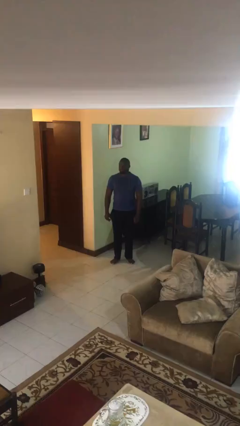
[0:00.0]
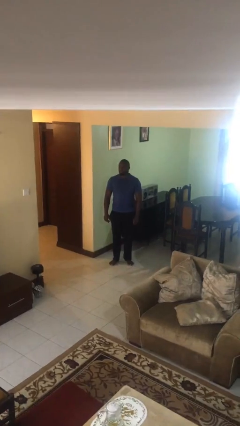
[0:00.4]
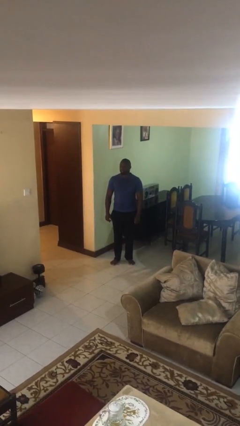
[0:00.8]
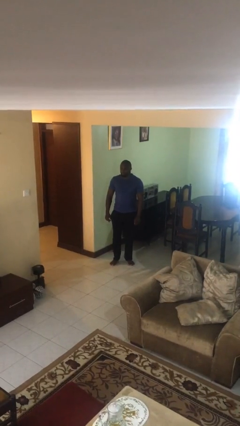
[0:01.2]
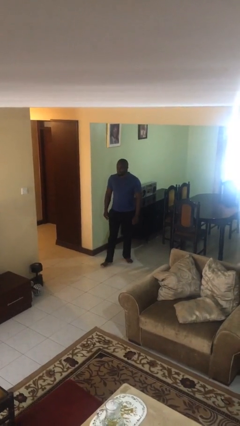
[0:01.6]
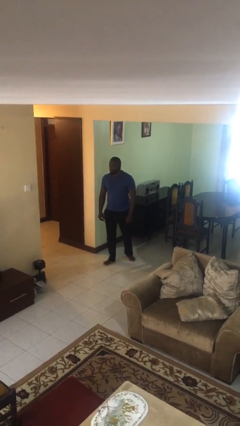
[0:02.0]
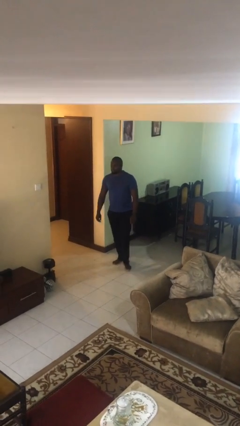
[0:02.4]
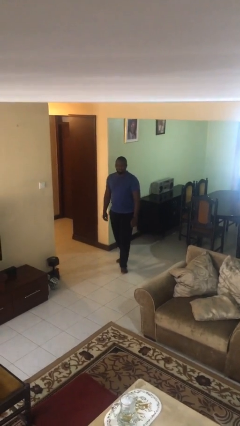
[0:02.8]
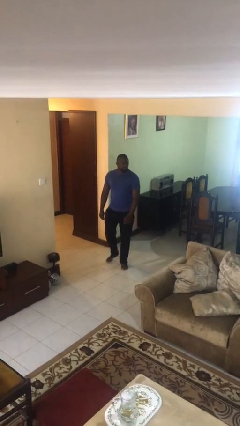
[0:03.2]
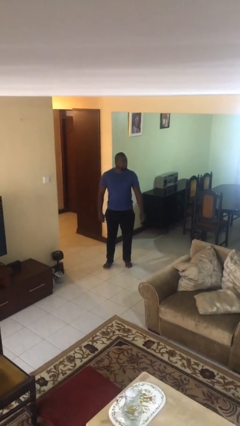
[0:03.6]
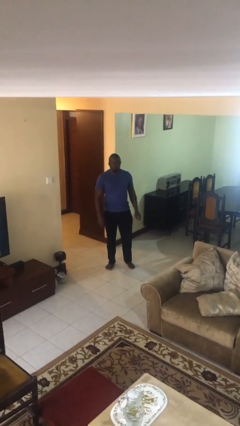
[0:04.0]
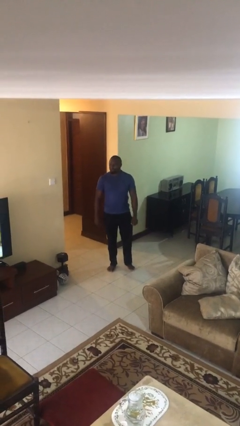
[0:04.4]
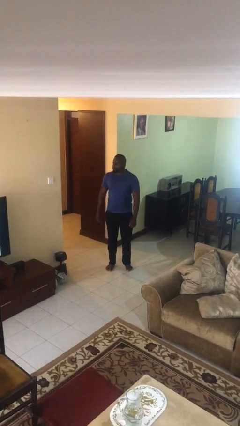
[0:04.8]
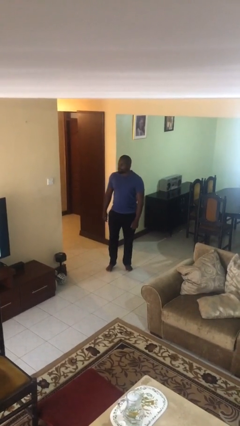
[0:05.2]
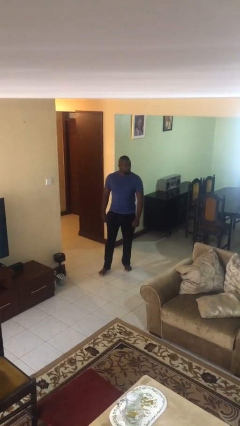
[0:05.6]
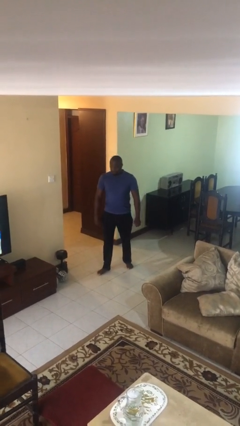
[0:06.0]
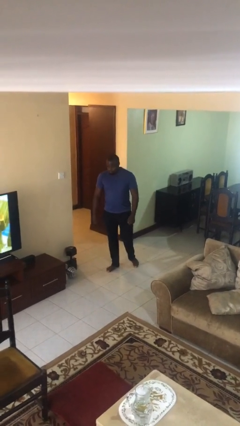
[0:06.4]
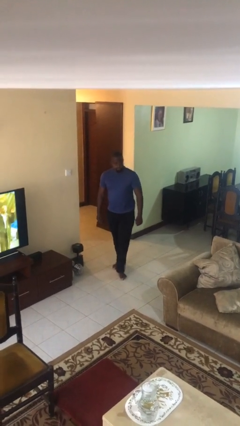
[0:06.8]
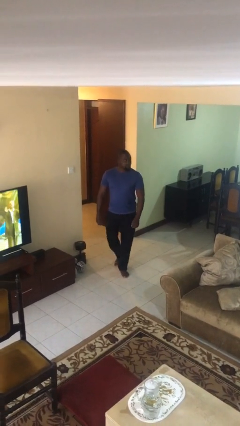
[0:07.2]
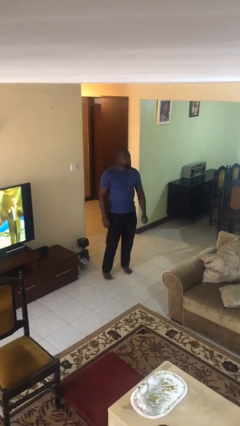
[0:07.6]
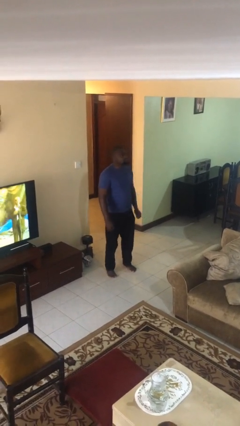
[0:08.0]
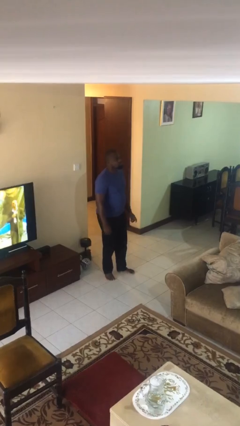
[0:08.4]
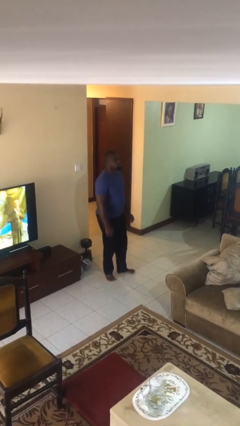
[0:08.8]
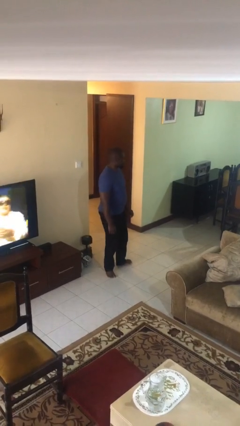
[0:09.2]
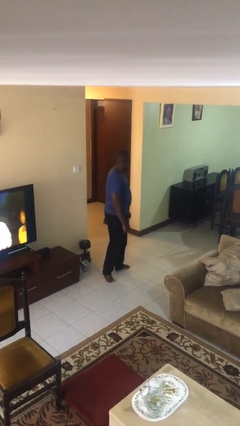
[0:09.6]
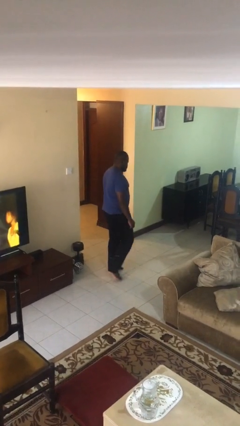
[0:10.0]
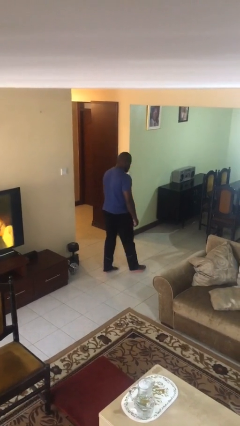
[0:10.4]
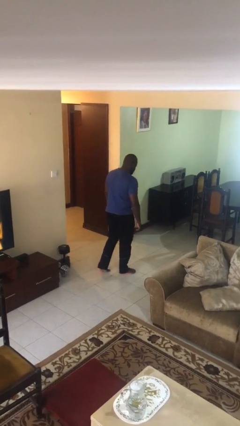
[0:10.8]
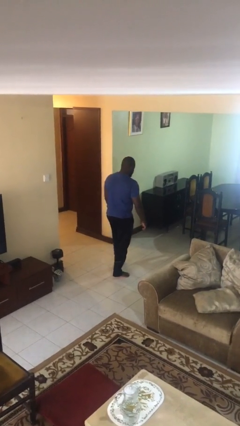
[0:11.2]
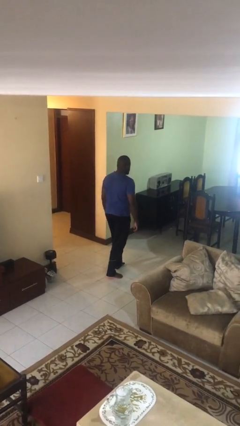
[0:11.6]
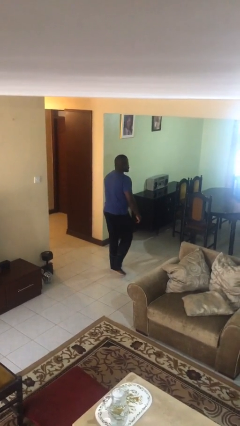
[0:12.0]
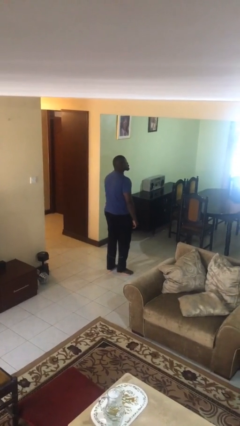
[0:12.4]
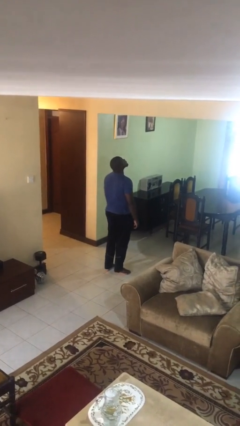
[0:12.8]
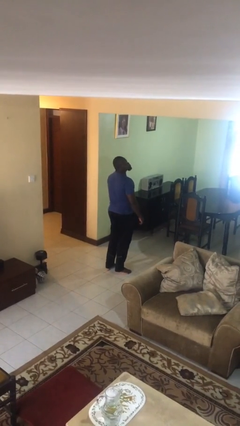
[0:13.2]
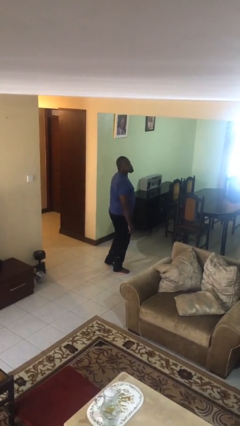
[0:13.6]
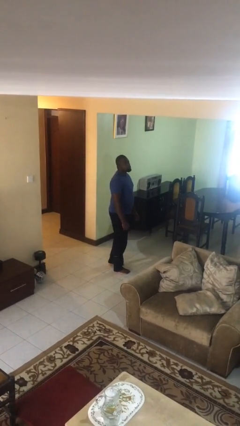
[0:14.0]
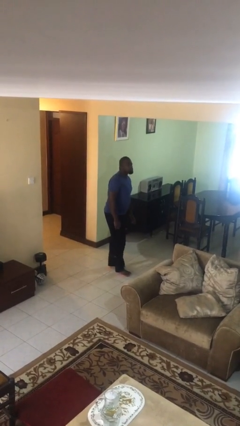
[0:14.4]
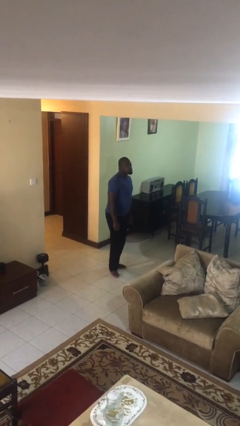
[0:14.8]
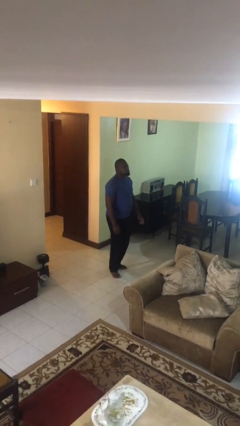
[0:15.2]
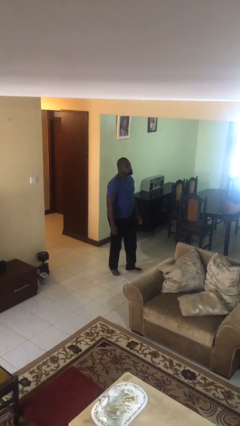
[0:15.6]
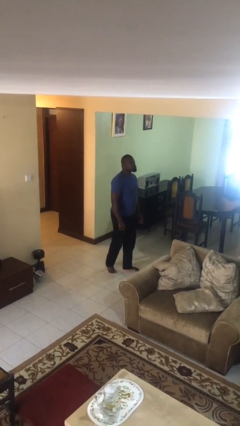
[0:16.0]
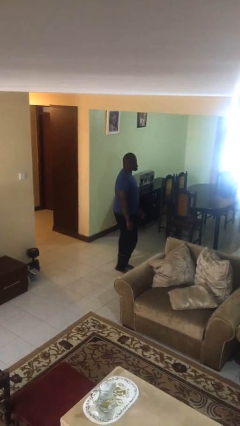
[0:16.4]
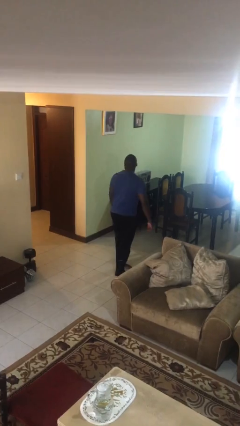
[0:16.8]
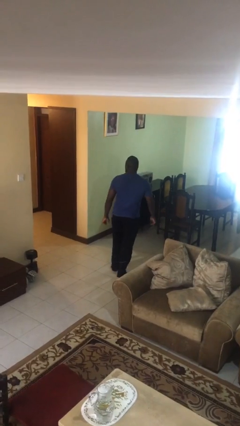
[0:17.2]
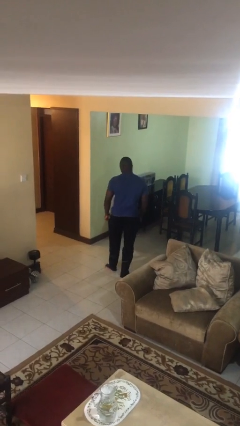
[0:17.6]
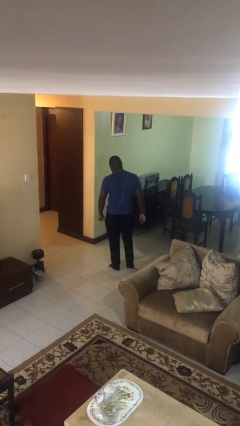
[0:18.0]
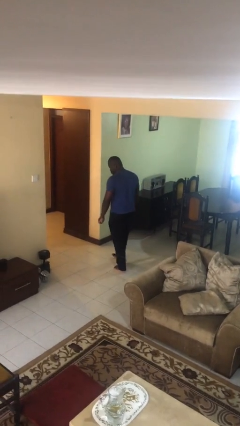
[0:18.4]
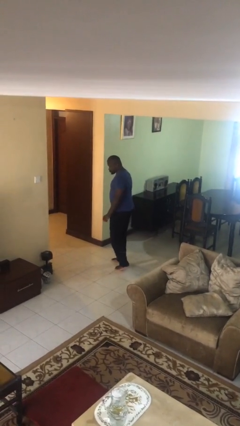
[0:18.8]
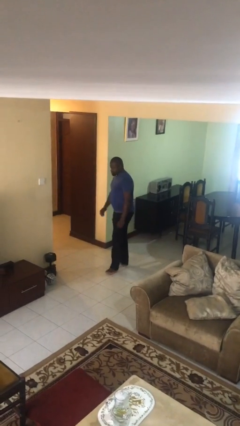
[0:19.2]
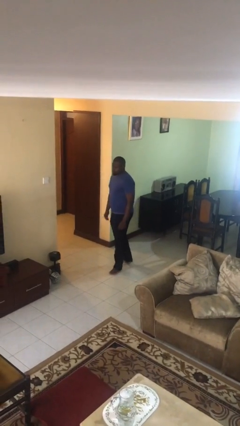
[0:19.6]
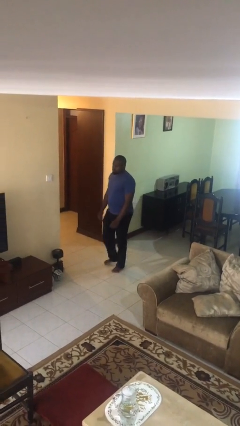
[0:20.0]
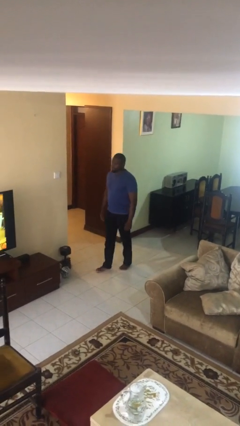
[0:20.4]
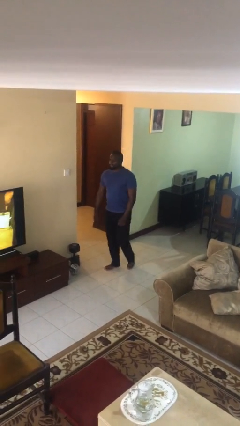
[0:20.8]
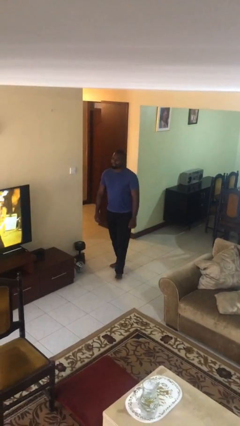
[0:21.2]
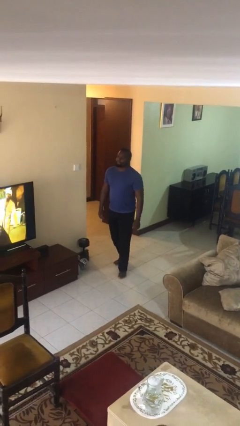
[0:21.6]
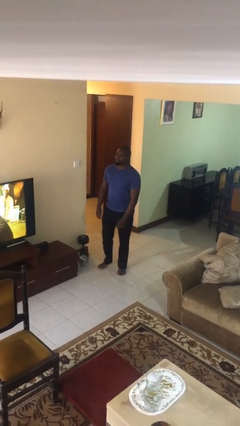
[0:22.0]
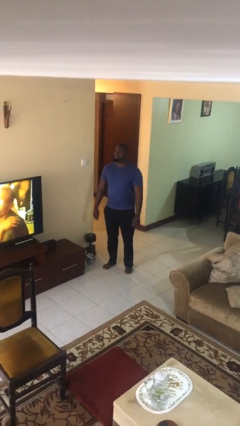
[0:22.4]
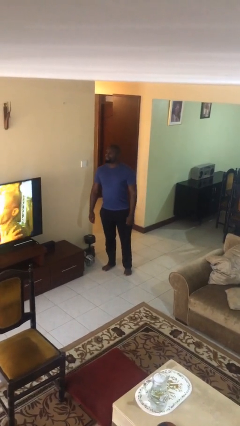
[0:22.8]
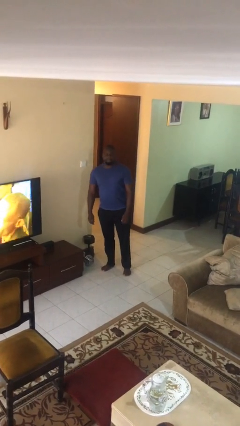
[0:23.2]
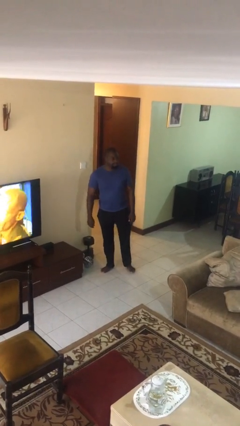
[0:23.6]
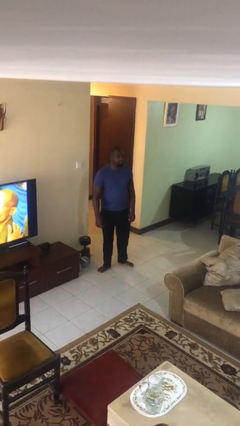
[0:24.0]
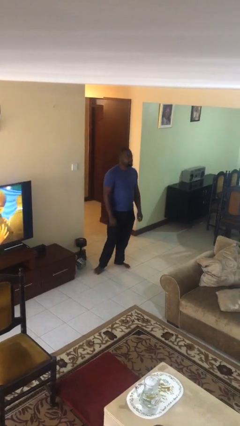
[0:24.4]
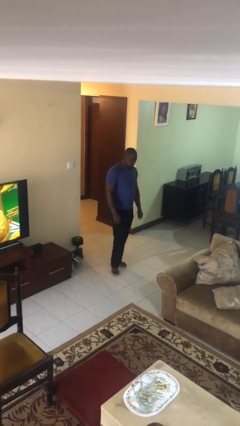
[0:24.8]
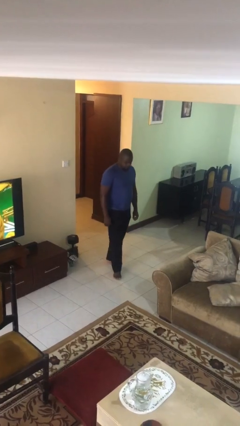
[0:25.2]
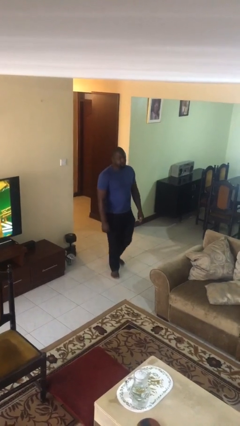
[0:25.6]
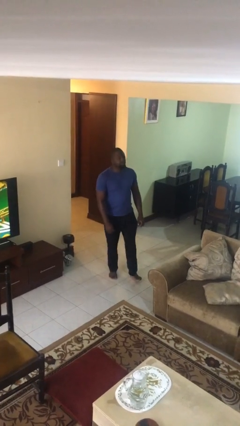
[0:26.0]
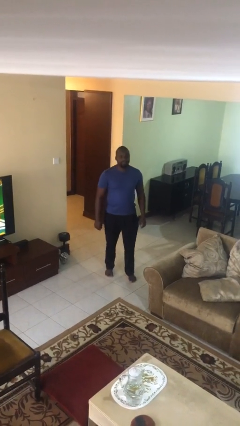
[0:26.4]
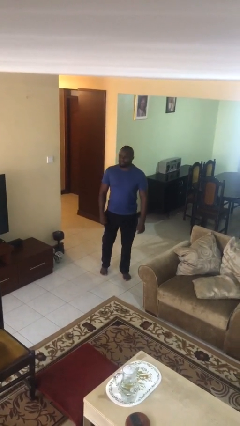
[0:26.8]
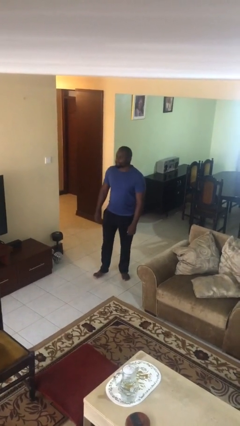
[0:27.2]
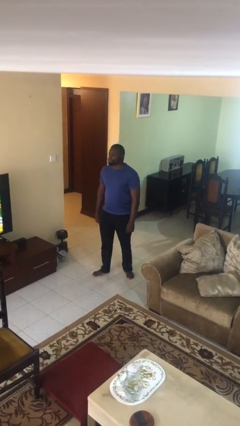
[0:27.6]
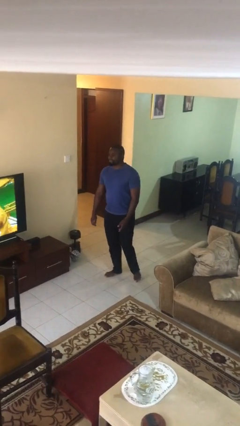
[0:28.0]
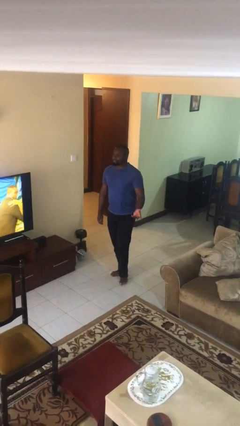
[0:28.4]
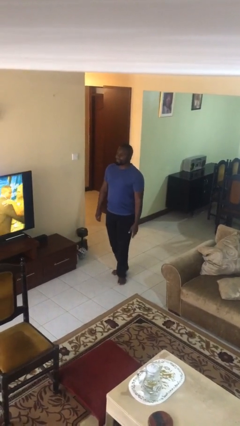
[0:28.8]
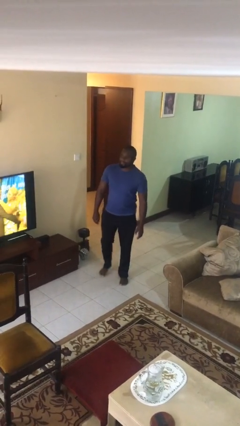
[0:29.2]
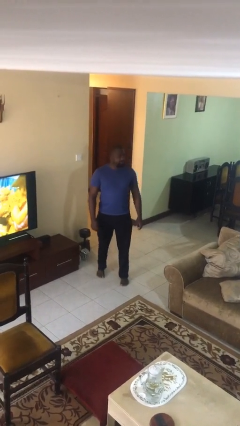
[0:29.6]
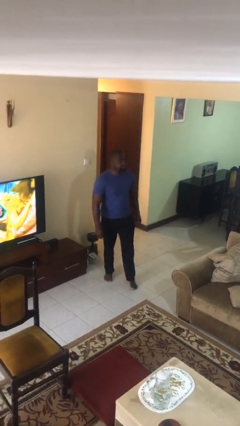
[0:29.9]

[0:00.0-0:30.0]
person walks

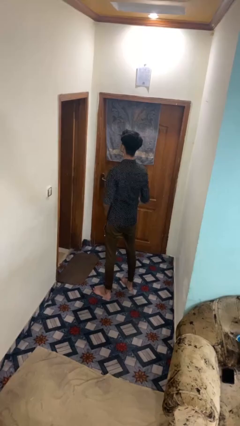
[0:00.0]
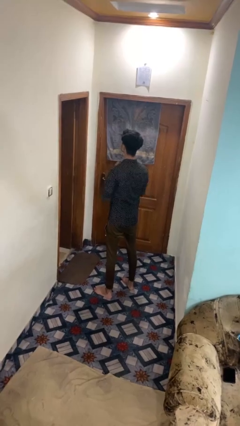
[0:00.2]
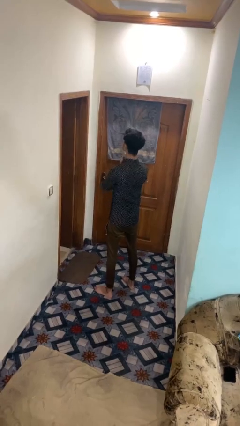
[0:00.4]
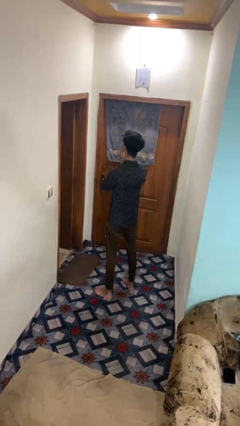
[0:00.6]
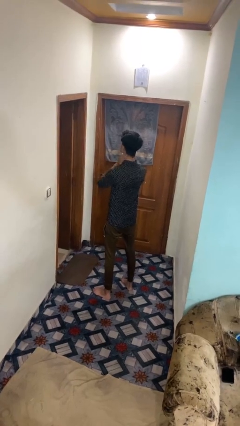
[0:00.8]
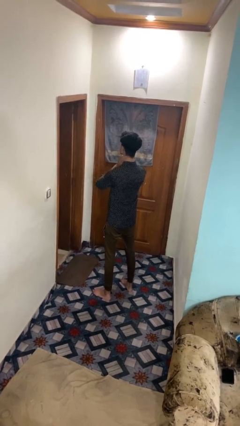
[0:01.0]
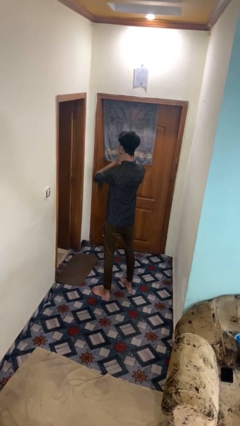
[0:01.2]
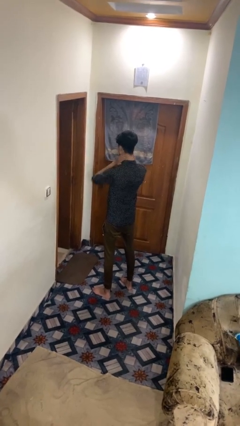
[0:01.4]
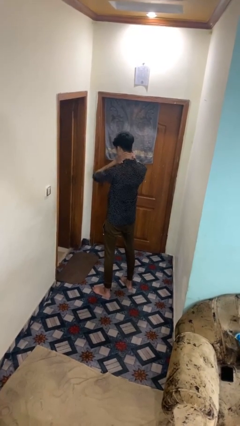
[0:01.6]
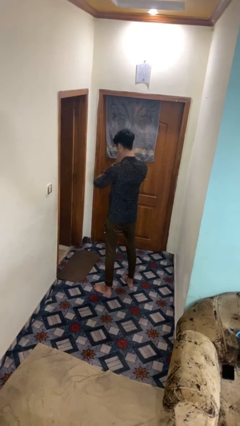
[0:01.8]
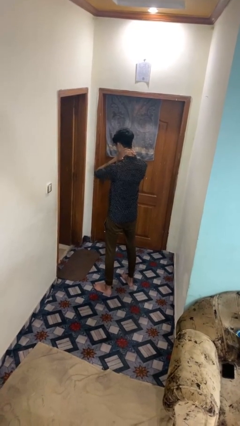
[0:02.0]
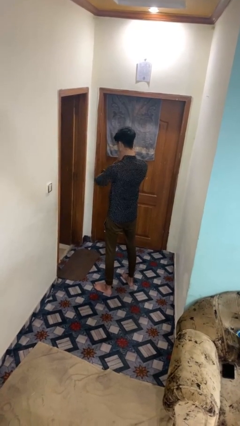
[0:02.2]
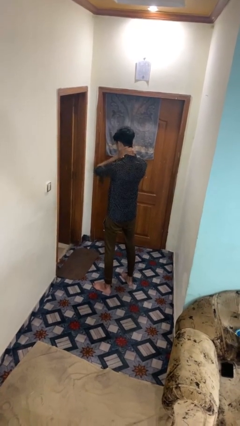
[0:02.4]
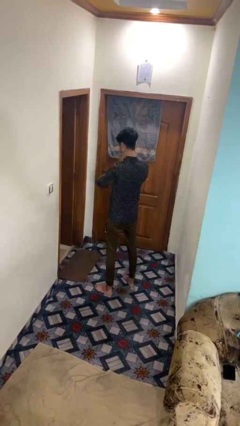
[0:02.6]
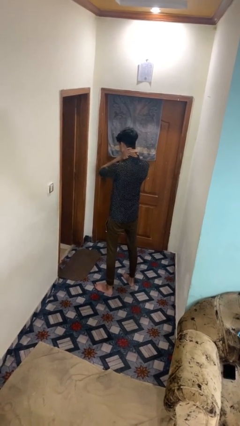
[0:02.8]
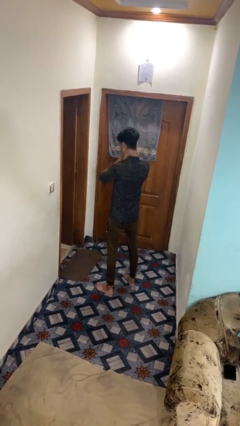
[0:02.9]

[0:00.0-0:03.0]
person rubs neck

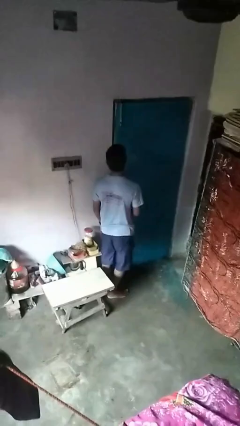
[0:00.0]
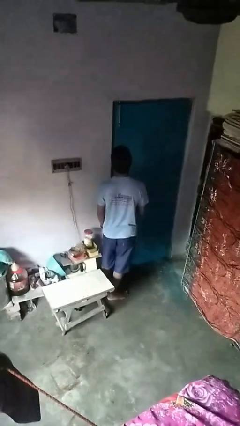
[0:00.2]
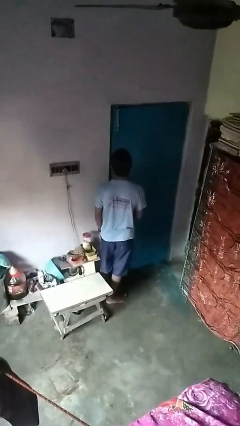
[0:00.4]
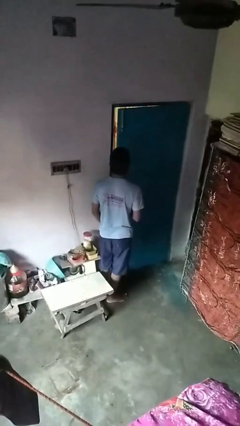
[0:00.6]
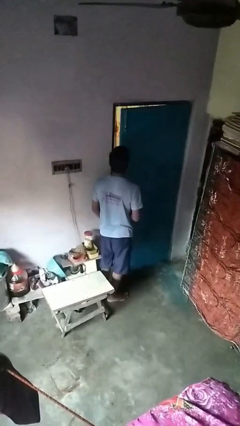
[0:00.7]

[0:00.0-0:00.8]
person closes facility door
